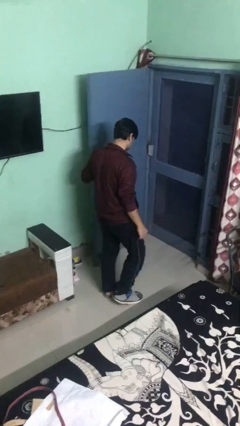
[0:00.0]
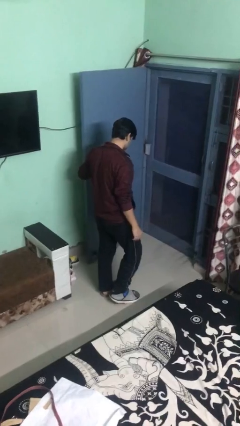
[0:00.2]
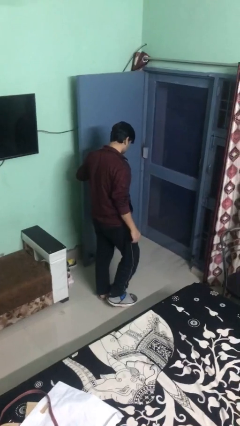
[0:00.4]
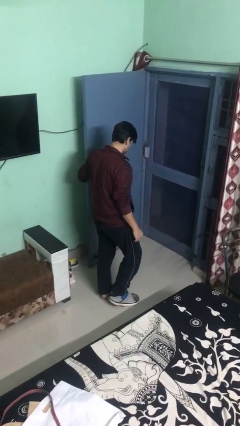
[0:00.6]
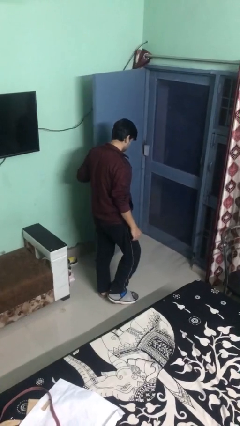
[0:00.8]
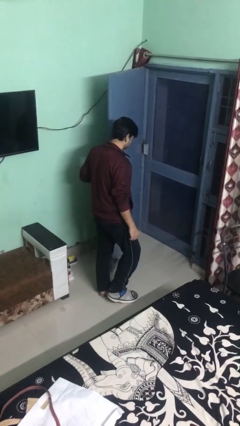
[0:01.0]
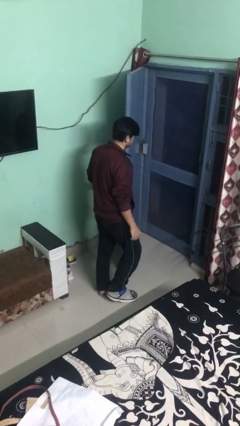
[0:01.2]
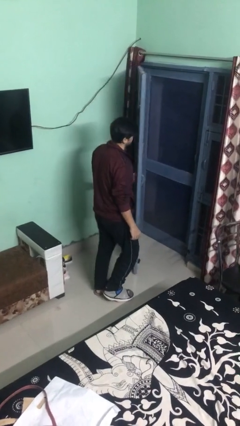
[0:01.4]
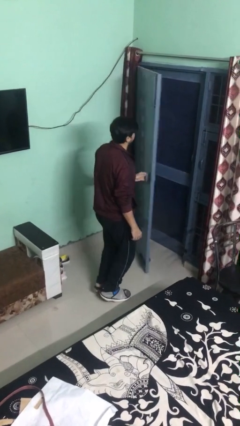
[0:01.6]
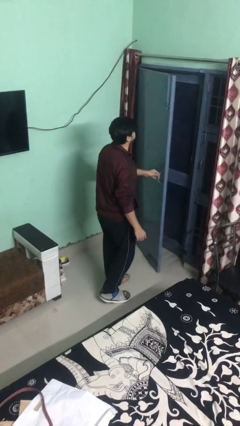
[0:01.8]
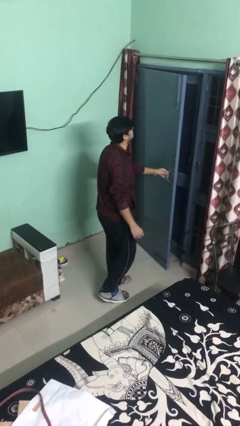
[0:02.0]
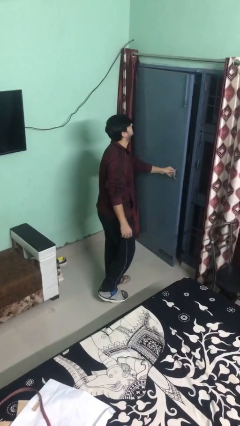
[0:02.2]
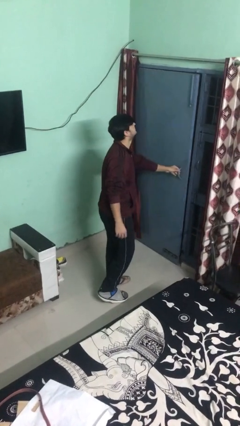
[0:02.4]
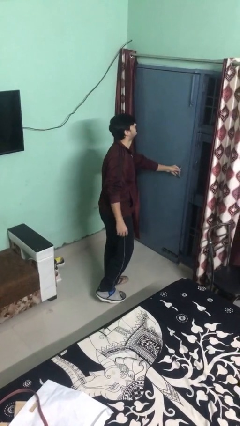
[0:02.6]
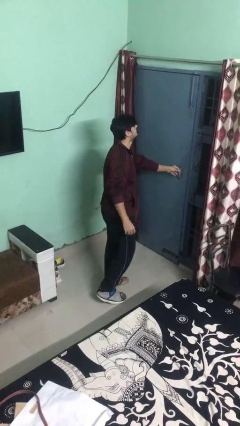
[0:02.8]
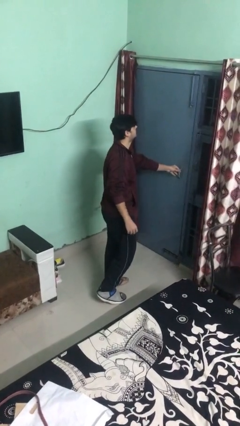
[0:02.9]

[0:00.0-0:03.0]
person closes facility door

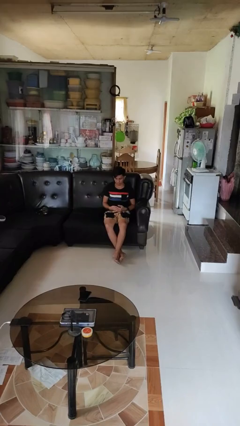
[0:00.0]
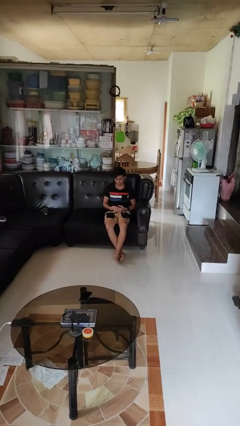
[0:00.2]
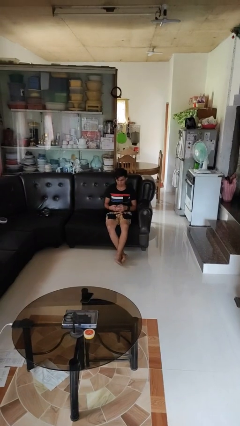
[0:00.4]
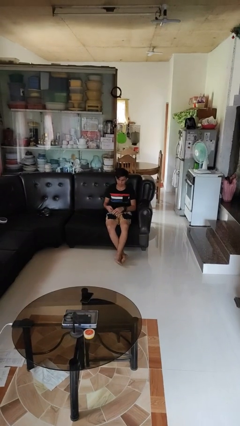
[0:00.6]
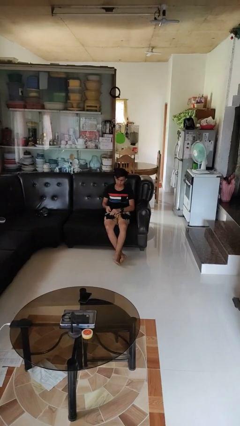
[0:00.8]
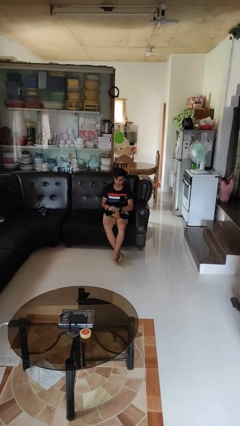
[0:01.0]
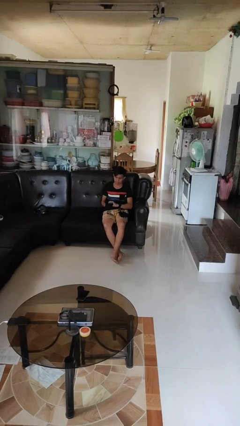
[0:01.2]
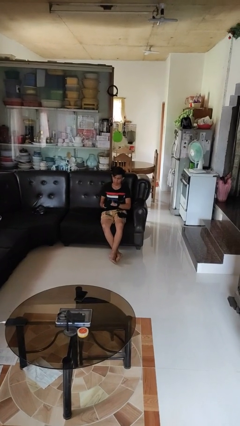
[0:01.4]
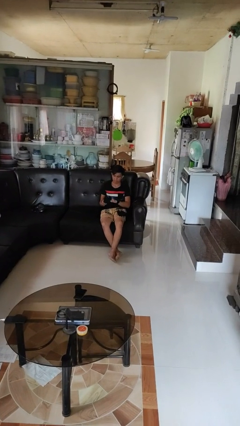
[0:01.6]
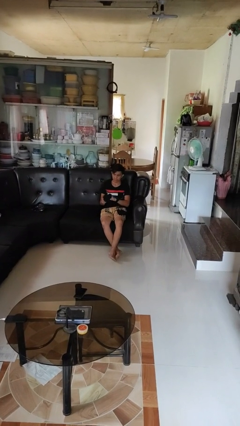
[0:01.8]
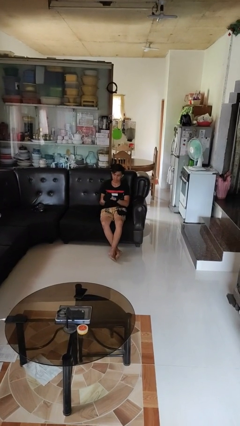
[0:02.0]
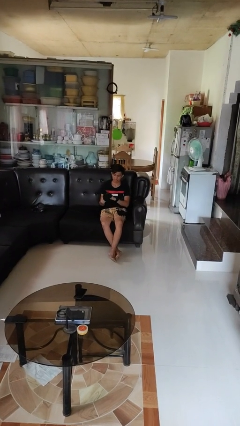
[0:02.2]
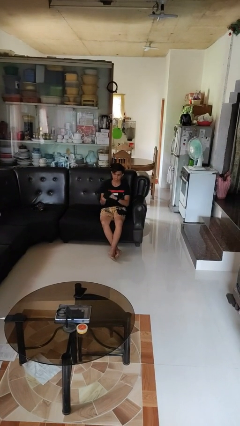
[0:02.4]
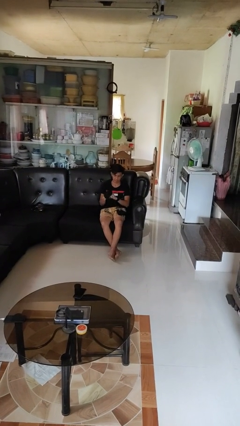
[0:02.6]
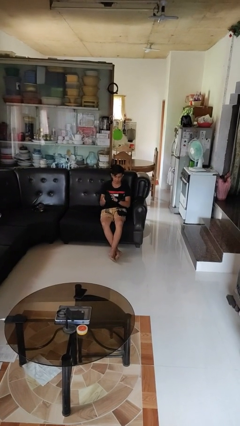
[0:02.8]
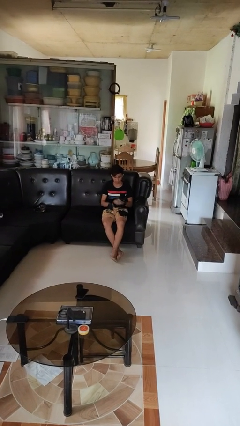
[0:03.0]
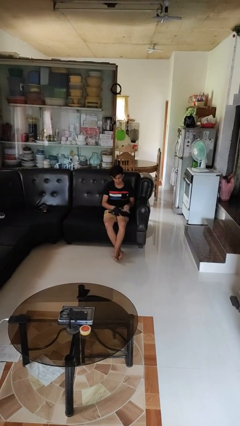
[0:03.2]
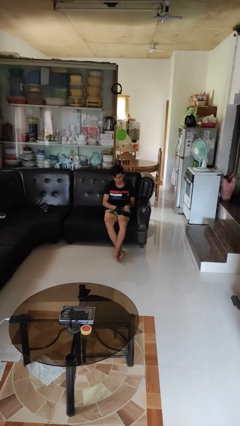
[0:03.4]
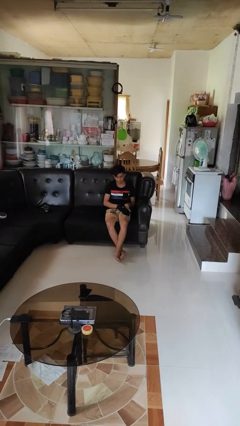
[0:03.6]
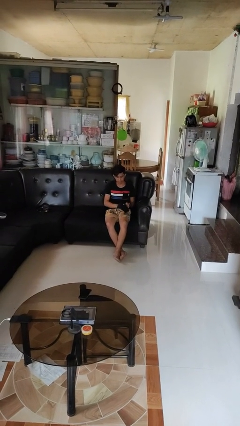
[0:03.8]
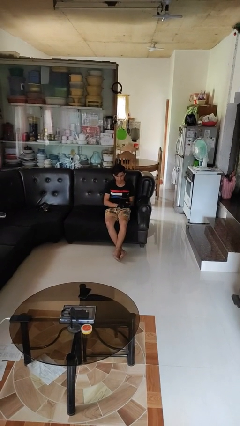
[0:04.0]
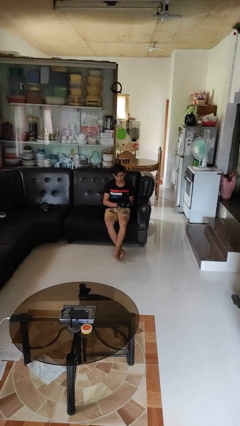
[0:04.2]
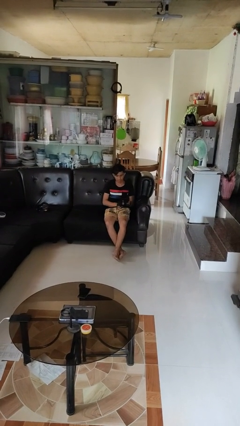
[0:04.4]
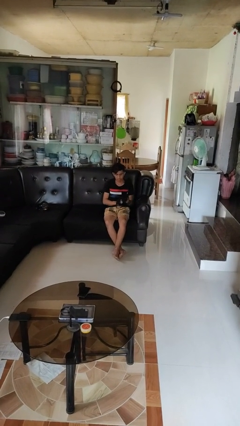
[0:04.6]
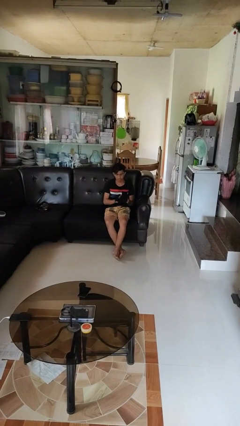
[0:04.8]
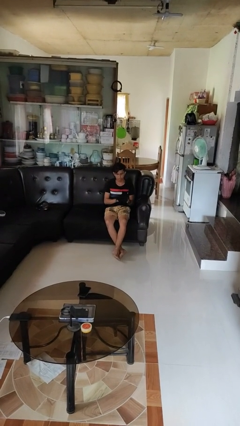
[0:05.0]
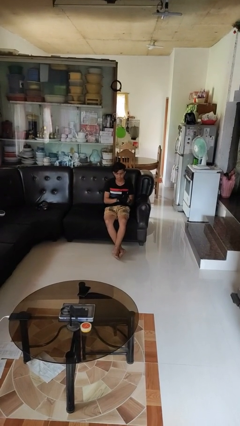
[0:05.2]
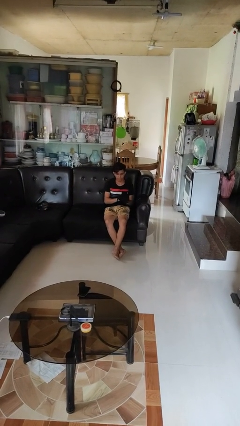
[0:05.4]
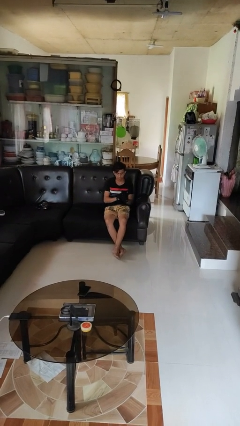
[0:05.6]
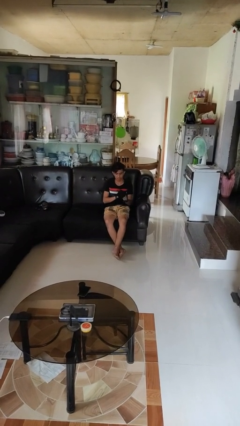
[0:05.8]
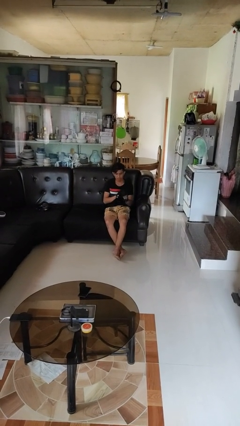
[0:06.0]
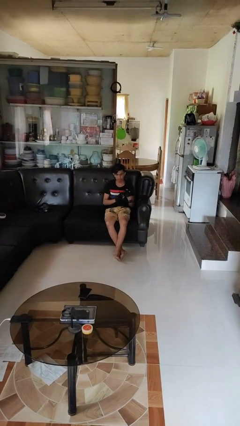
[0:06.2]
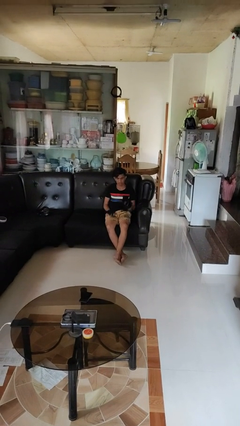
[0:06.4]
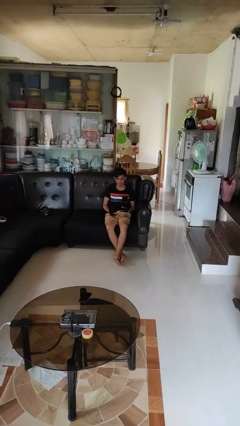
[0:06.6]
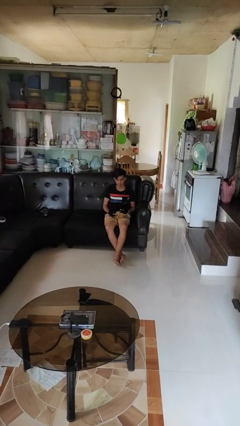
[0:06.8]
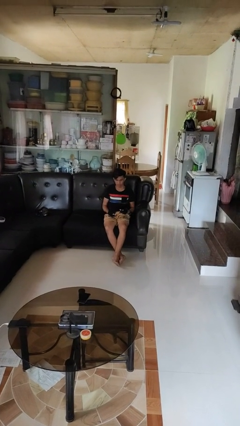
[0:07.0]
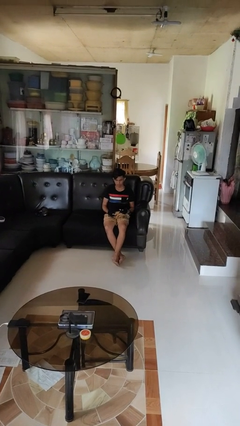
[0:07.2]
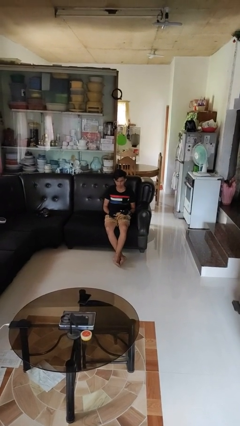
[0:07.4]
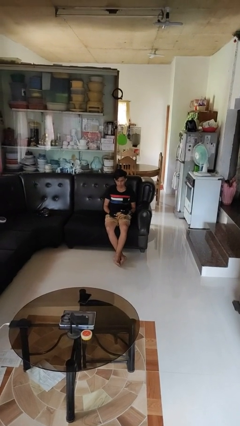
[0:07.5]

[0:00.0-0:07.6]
person puts on gloves

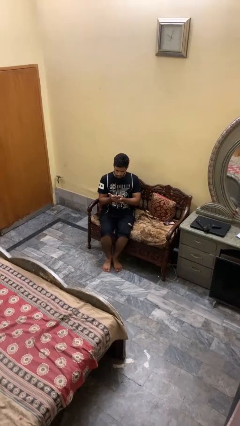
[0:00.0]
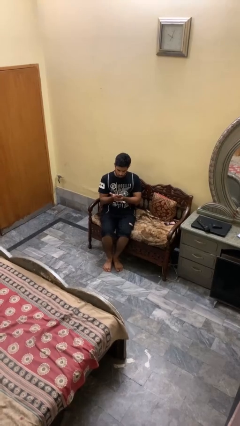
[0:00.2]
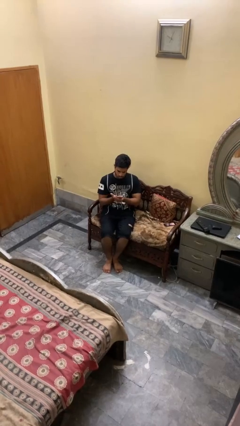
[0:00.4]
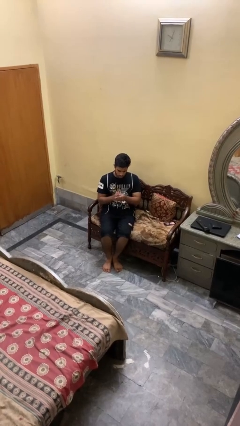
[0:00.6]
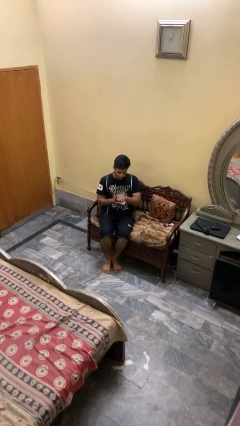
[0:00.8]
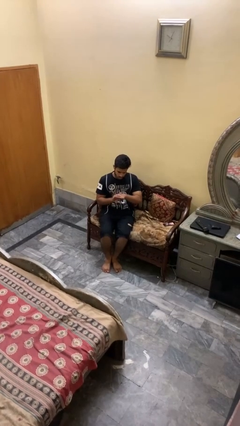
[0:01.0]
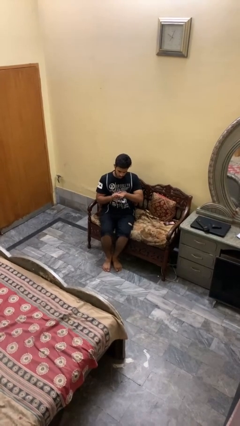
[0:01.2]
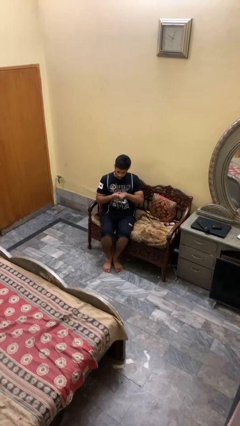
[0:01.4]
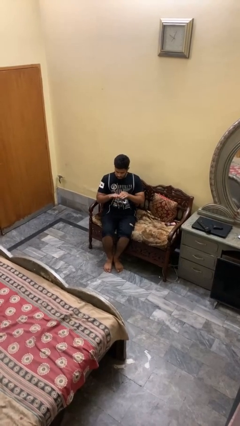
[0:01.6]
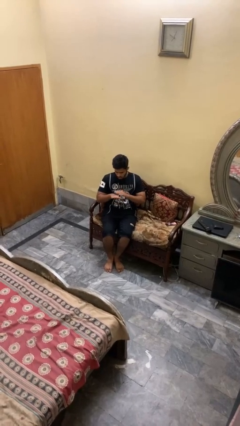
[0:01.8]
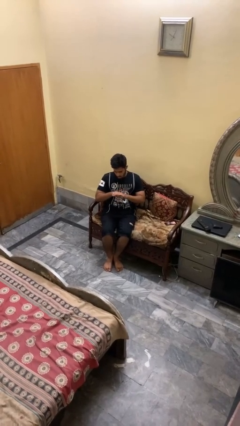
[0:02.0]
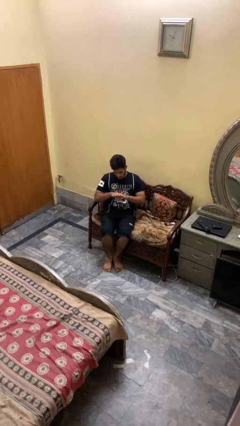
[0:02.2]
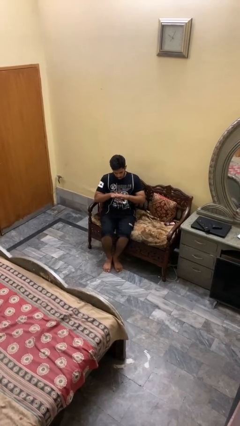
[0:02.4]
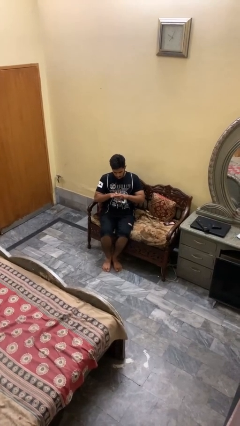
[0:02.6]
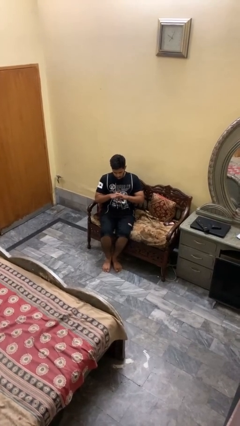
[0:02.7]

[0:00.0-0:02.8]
person looks at hands in lap

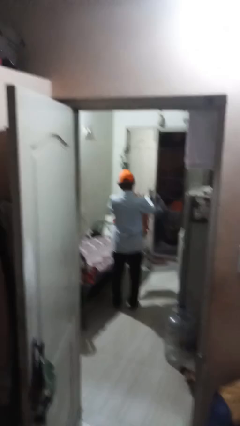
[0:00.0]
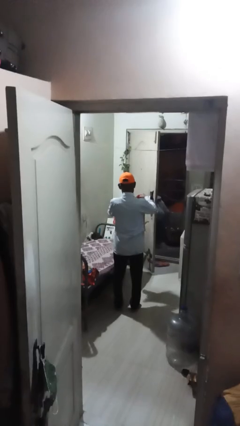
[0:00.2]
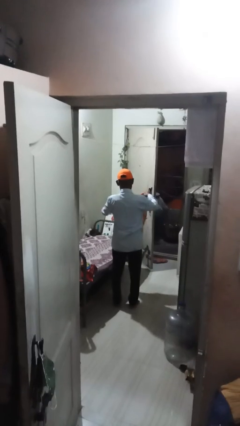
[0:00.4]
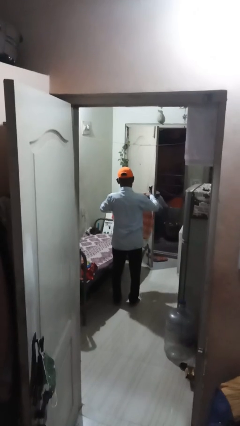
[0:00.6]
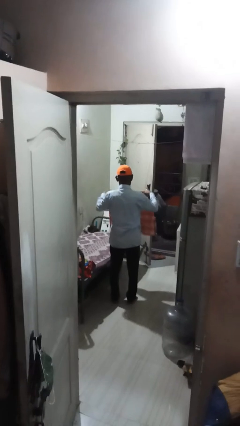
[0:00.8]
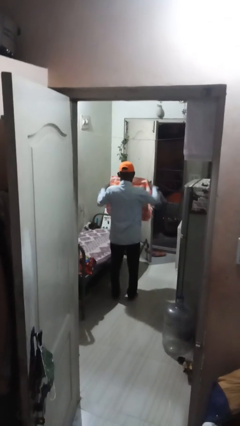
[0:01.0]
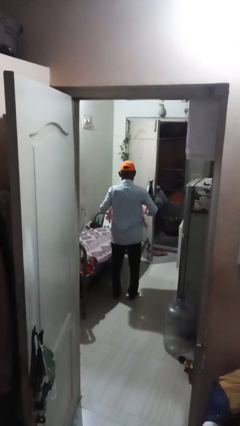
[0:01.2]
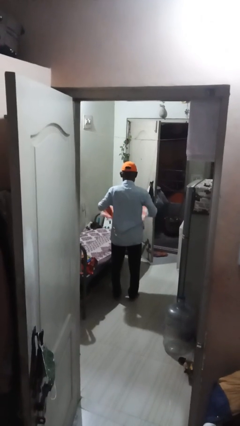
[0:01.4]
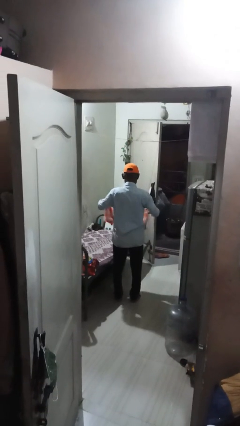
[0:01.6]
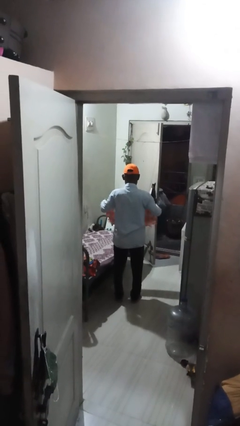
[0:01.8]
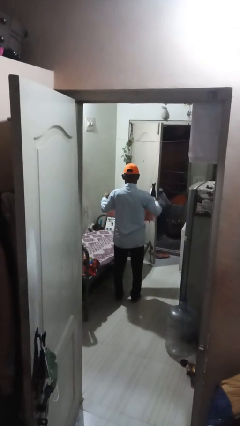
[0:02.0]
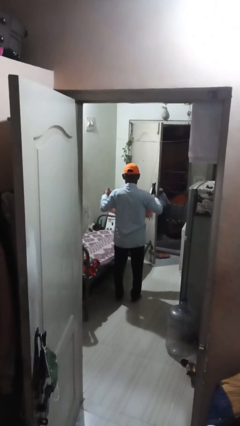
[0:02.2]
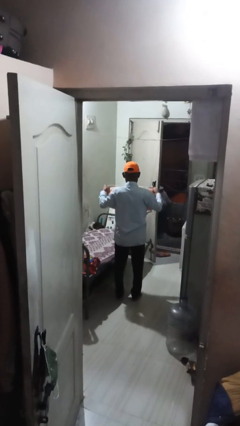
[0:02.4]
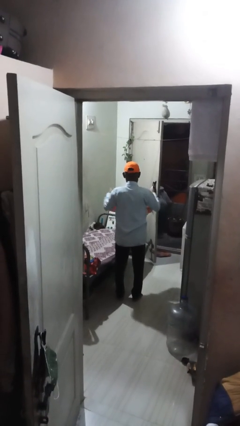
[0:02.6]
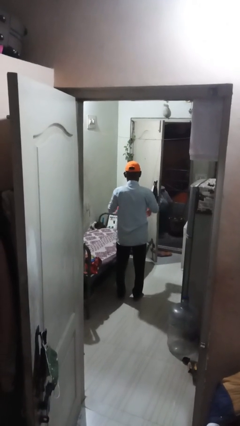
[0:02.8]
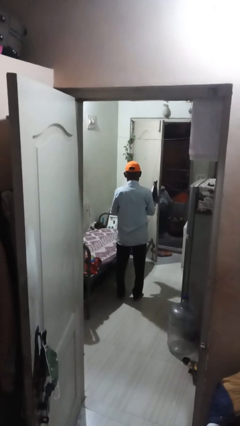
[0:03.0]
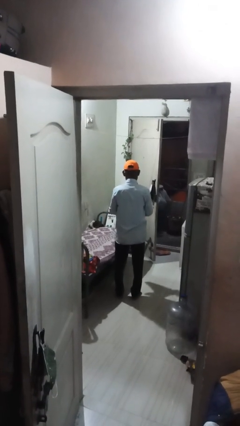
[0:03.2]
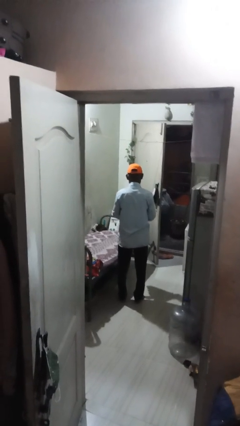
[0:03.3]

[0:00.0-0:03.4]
person folds towel

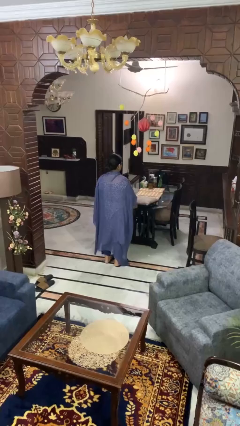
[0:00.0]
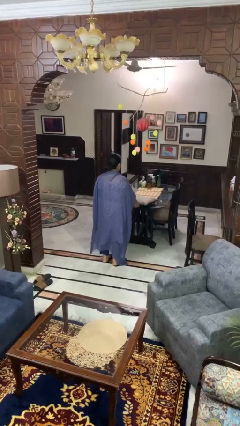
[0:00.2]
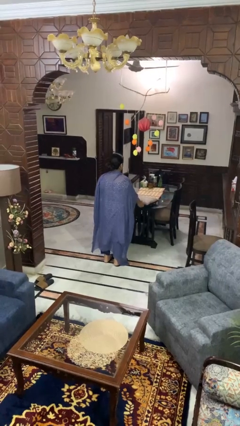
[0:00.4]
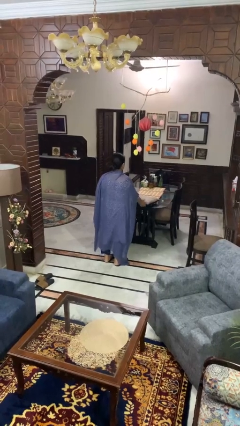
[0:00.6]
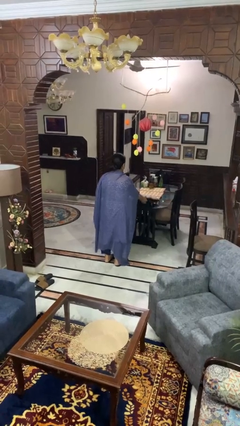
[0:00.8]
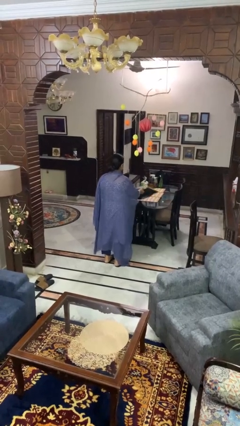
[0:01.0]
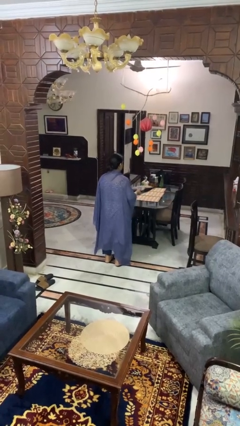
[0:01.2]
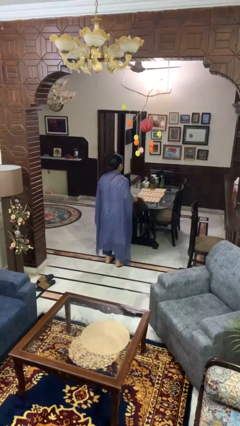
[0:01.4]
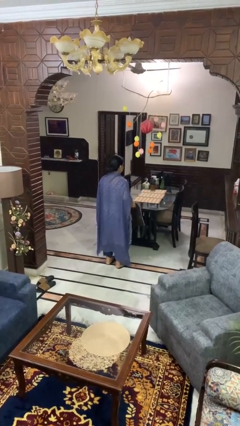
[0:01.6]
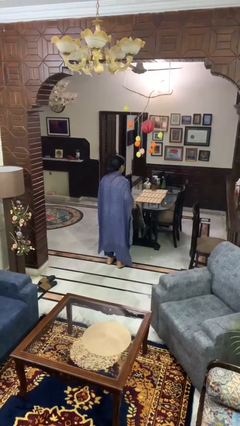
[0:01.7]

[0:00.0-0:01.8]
person picks up object from table
